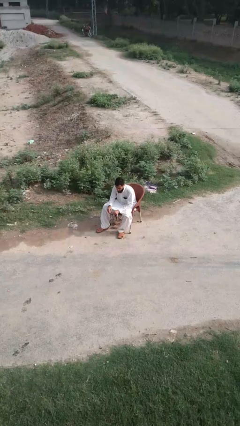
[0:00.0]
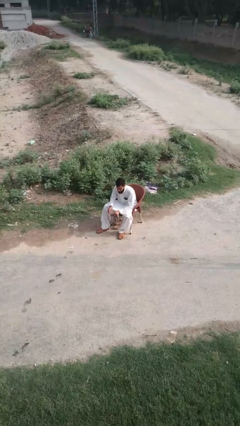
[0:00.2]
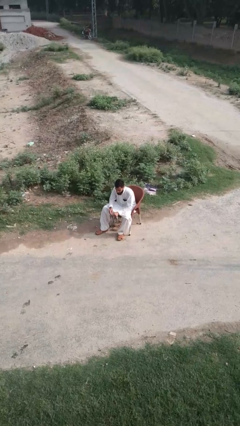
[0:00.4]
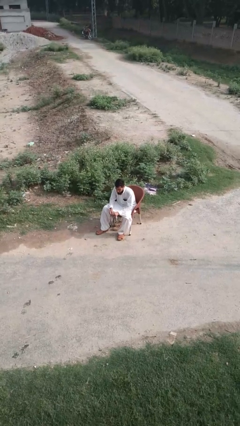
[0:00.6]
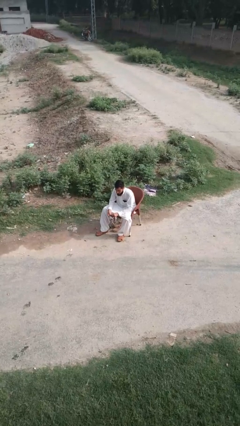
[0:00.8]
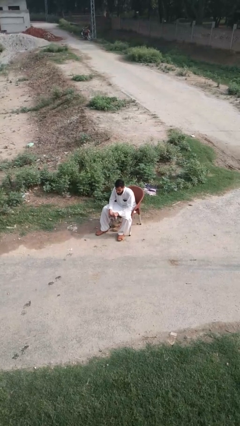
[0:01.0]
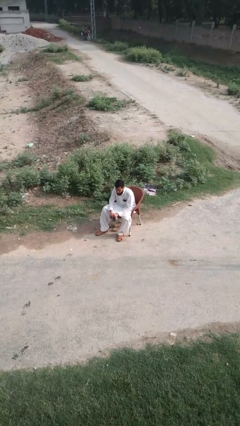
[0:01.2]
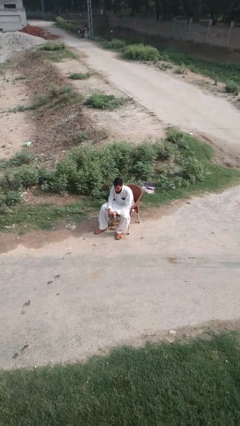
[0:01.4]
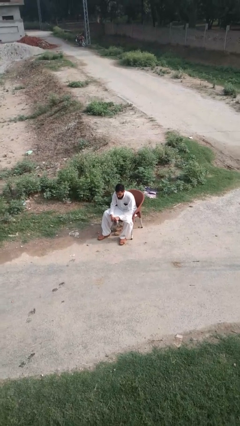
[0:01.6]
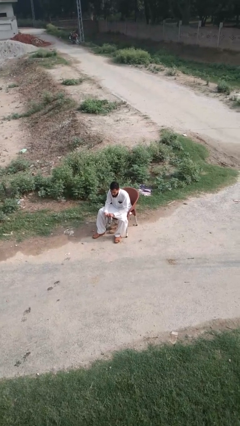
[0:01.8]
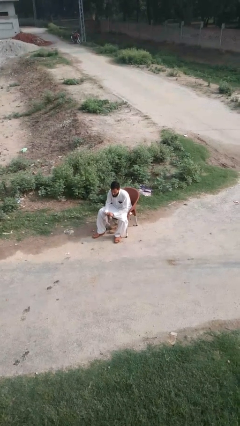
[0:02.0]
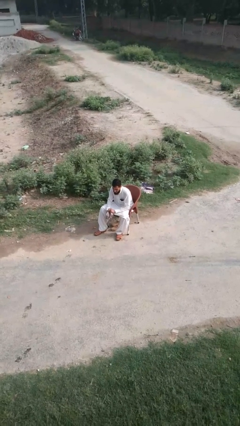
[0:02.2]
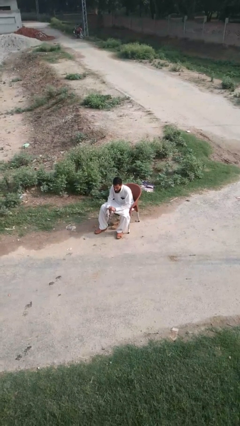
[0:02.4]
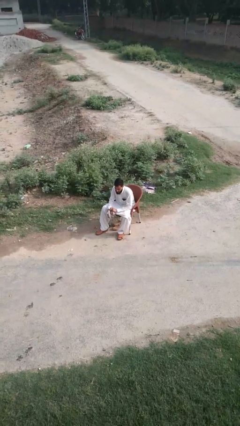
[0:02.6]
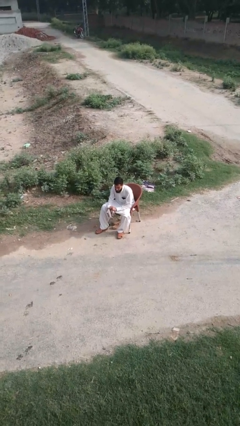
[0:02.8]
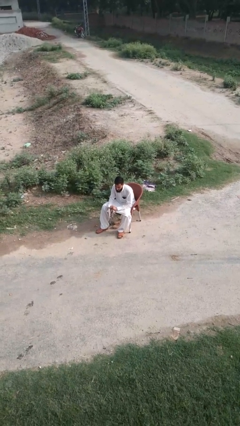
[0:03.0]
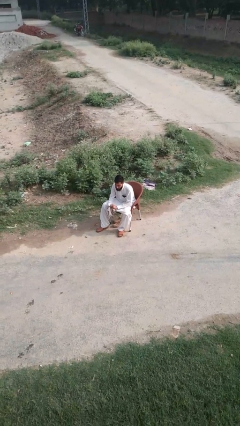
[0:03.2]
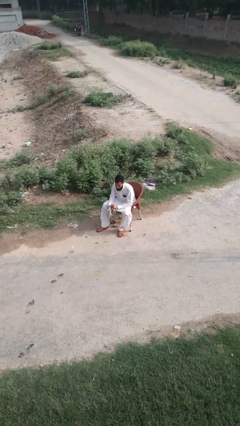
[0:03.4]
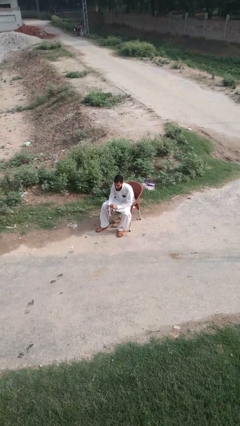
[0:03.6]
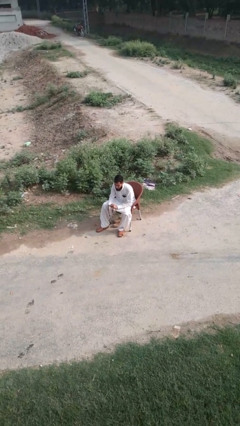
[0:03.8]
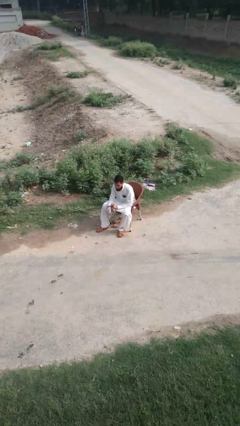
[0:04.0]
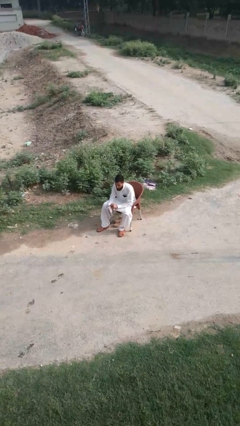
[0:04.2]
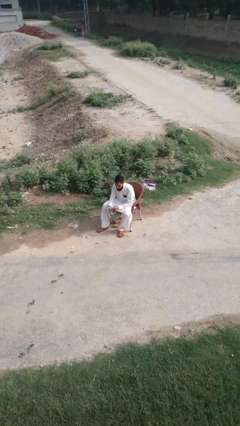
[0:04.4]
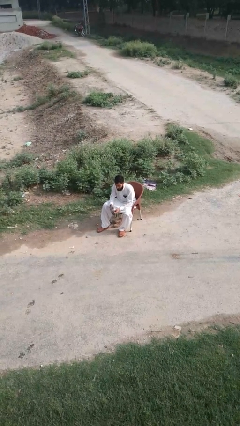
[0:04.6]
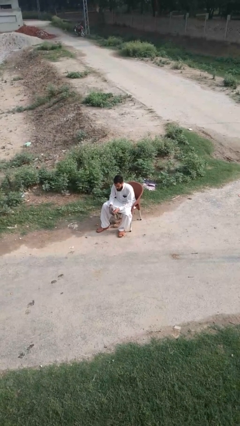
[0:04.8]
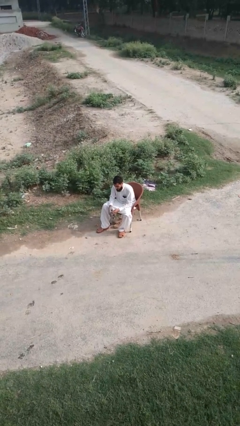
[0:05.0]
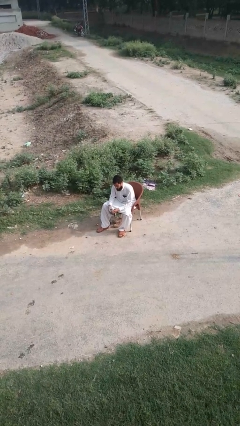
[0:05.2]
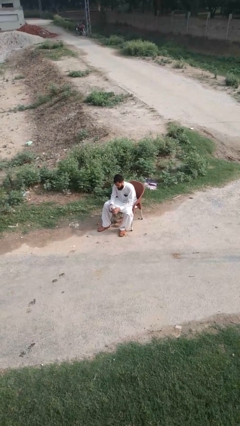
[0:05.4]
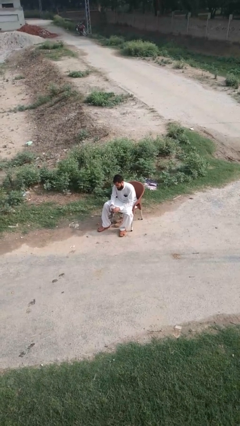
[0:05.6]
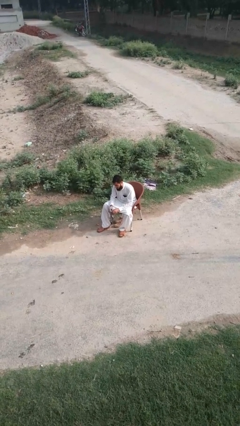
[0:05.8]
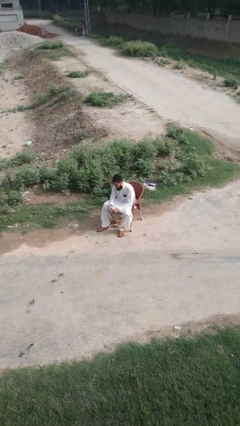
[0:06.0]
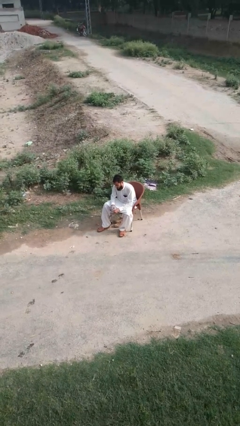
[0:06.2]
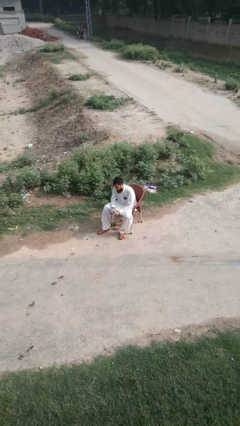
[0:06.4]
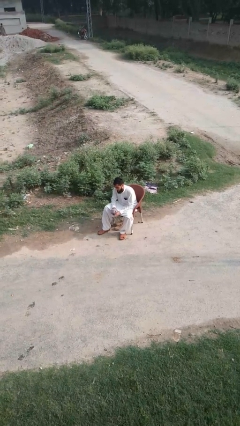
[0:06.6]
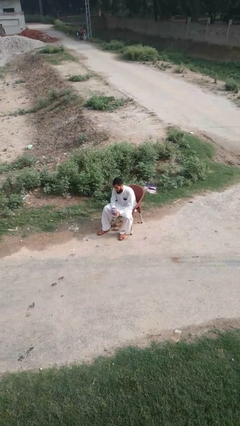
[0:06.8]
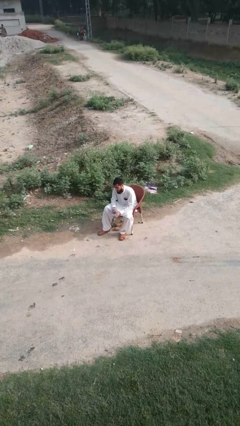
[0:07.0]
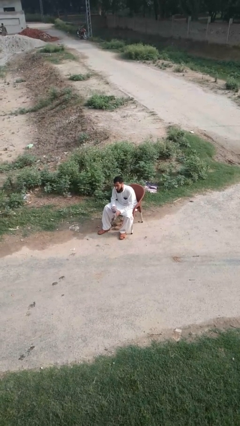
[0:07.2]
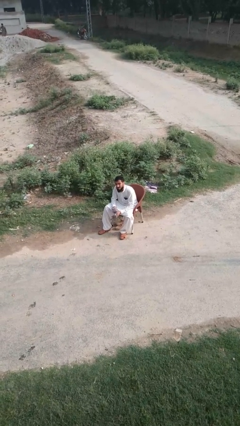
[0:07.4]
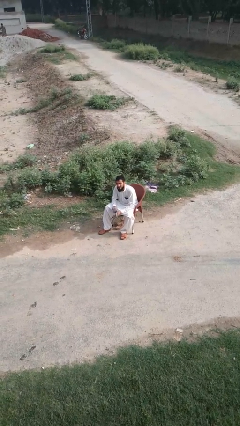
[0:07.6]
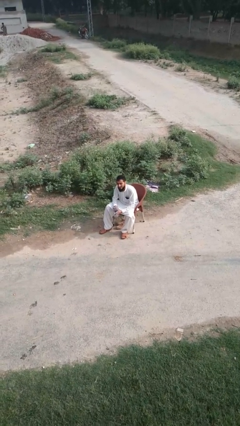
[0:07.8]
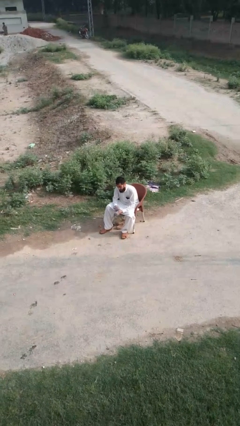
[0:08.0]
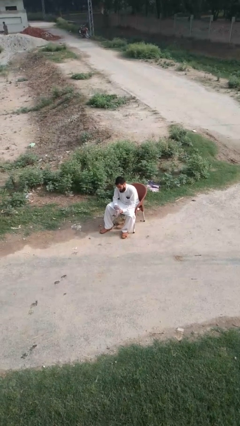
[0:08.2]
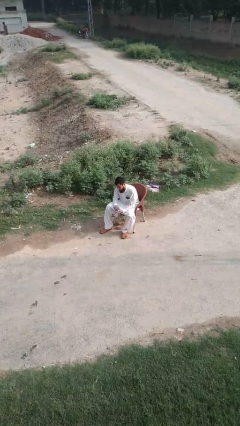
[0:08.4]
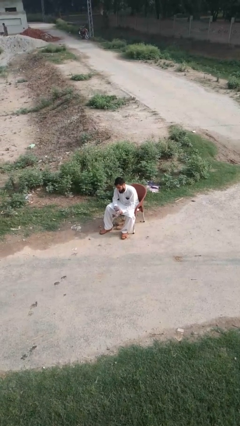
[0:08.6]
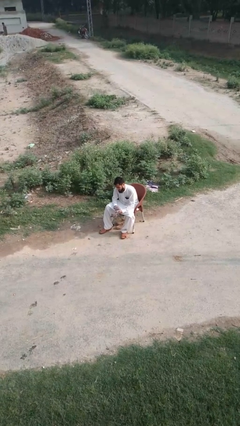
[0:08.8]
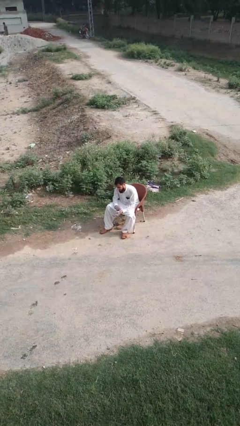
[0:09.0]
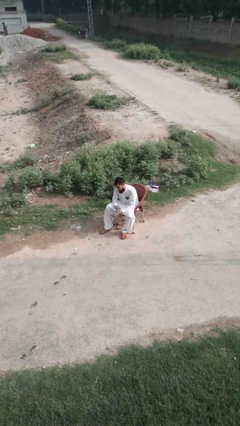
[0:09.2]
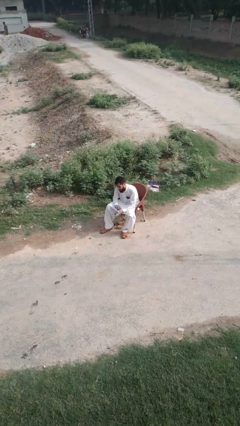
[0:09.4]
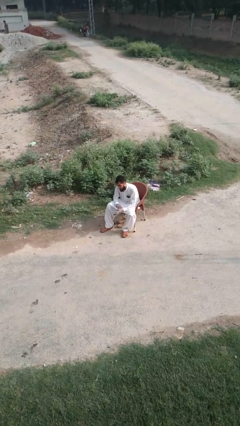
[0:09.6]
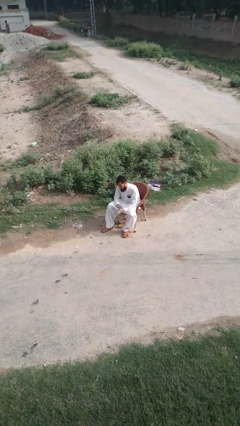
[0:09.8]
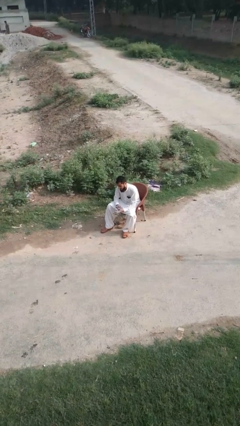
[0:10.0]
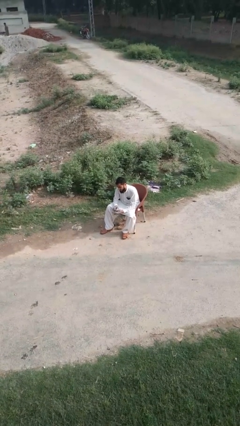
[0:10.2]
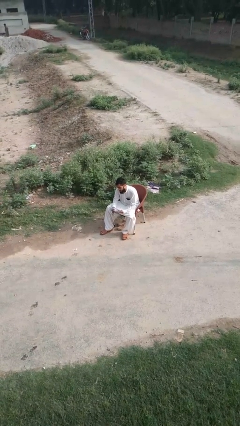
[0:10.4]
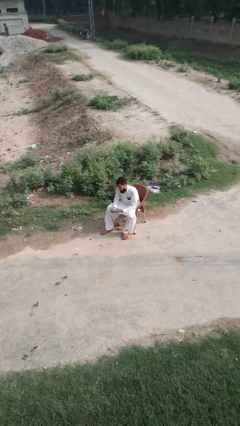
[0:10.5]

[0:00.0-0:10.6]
person puts on gloves

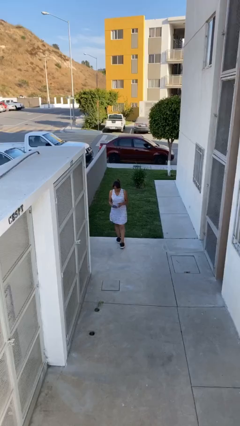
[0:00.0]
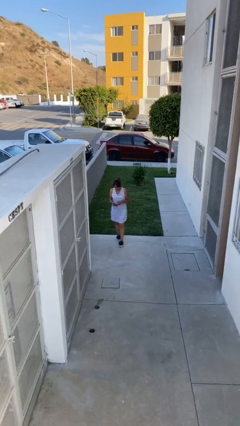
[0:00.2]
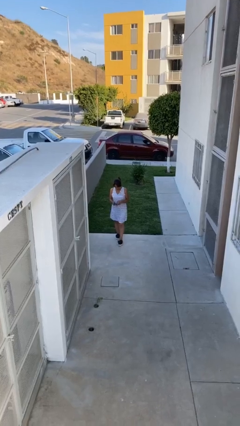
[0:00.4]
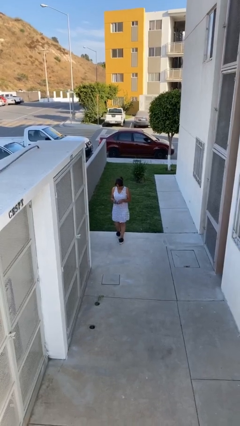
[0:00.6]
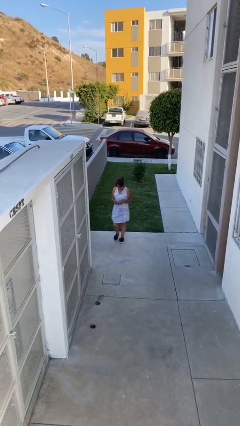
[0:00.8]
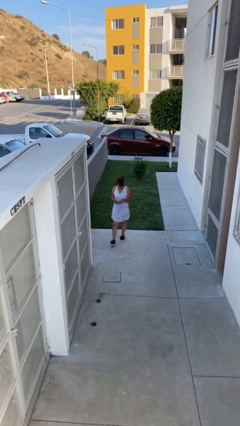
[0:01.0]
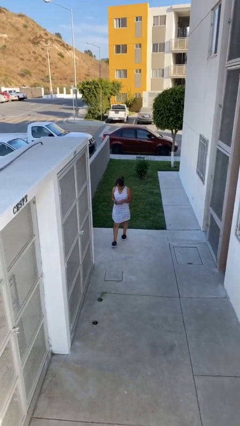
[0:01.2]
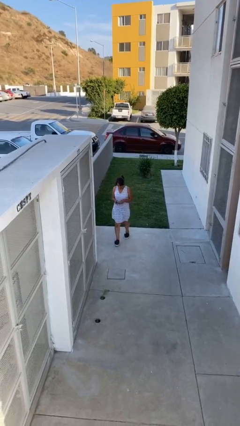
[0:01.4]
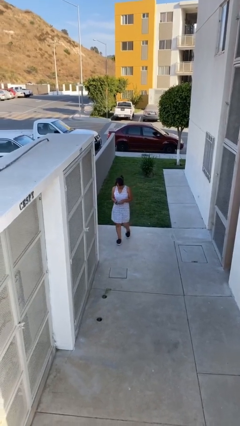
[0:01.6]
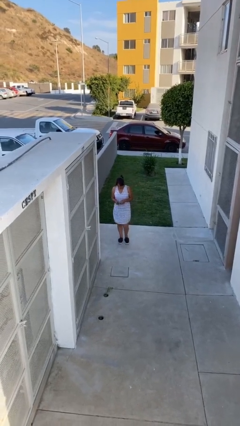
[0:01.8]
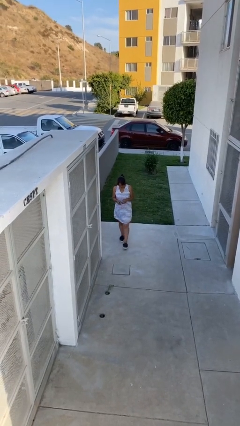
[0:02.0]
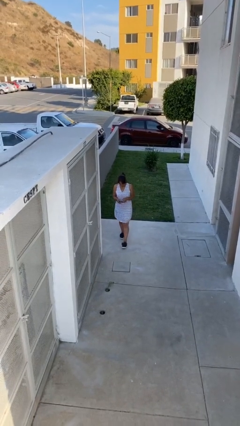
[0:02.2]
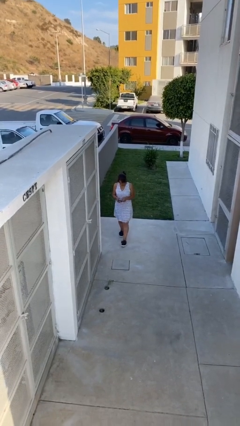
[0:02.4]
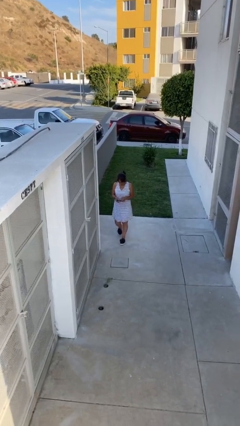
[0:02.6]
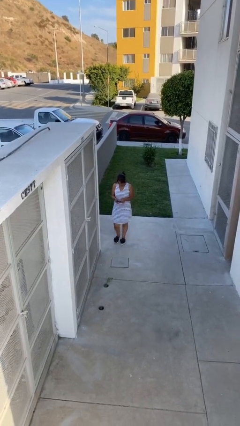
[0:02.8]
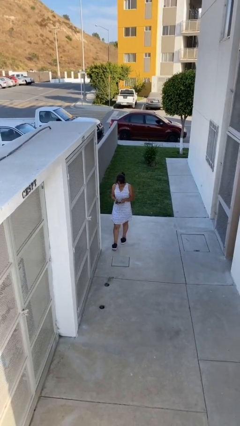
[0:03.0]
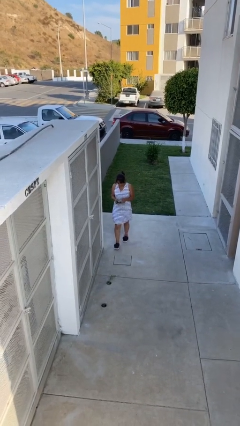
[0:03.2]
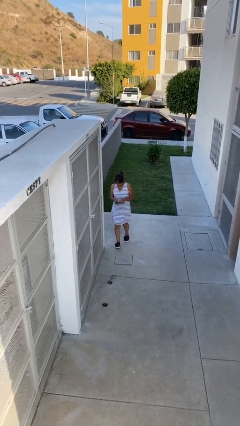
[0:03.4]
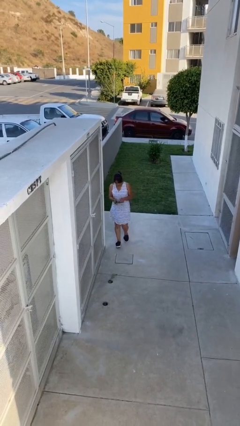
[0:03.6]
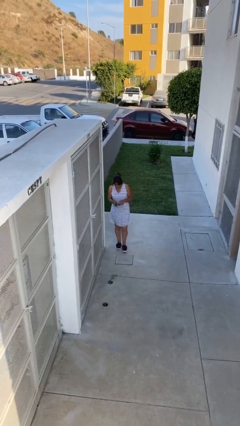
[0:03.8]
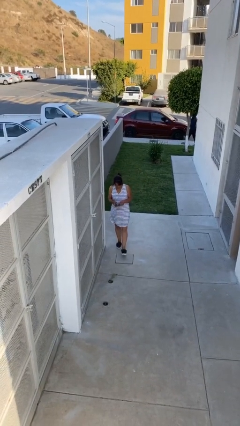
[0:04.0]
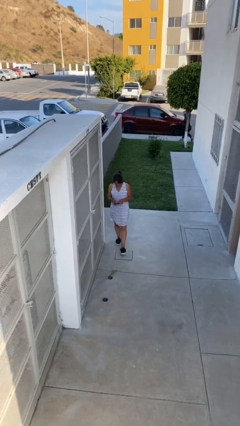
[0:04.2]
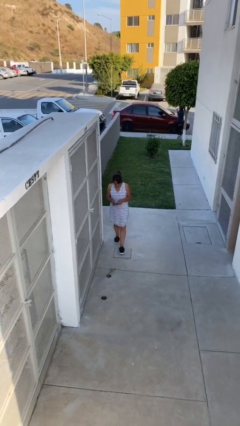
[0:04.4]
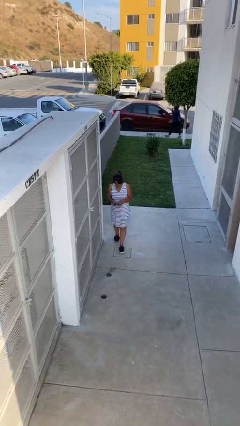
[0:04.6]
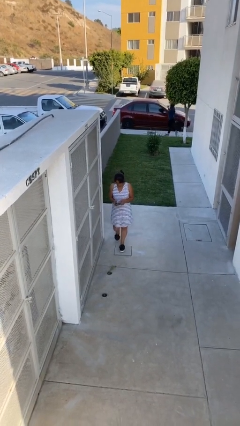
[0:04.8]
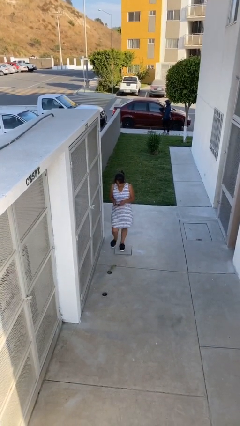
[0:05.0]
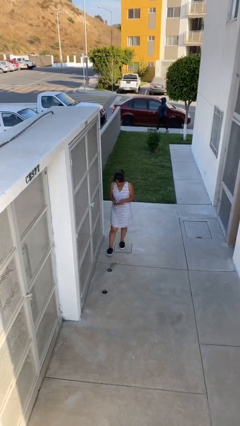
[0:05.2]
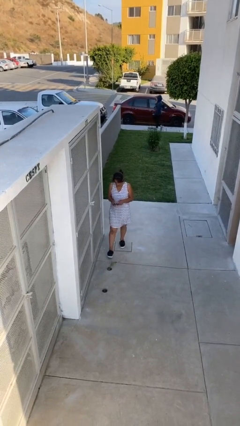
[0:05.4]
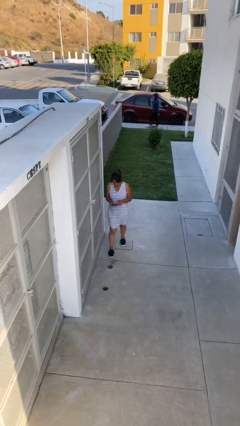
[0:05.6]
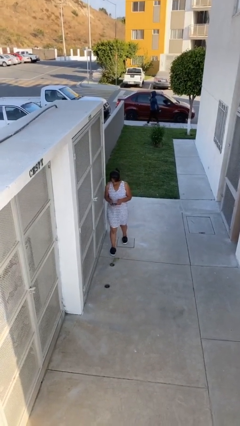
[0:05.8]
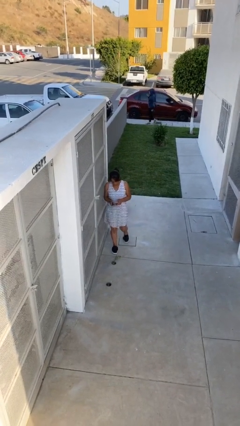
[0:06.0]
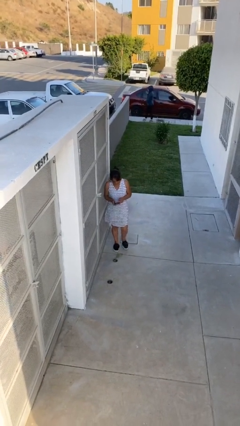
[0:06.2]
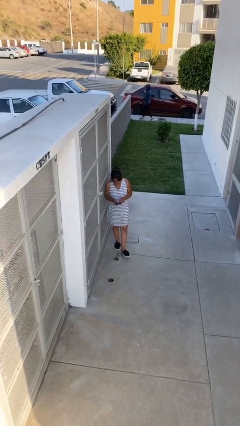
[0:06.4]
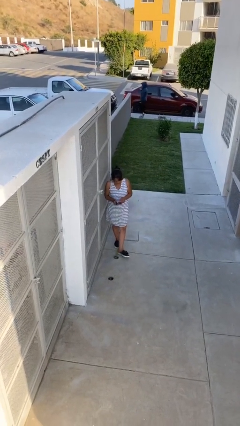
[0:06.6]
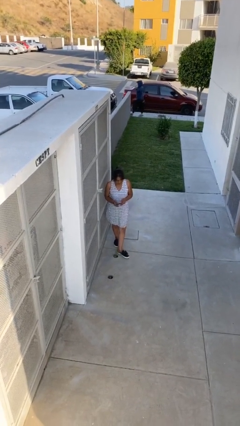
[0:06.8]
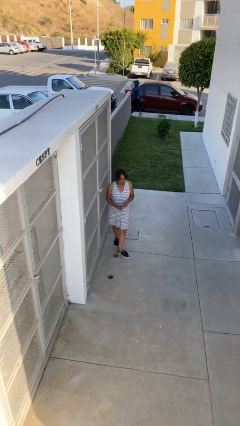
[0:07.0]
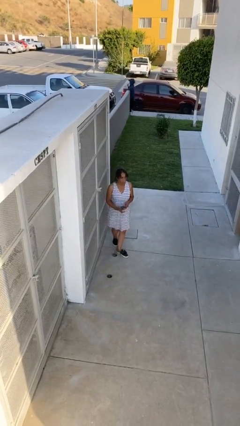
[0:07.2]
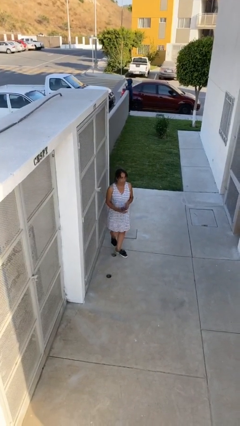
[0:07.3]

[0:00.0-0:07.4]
person texts on phone

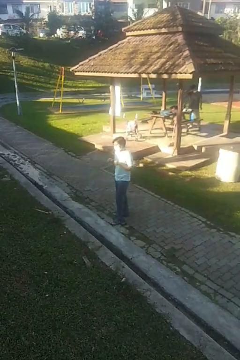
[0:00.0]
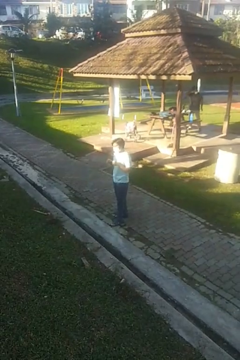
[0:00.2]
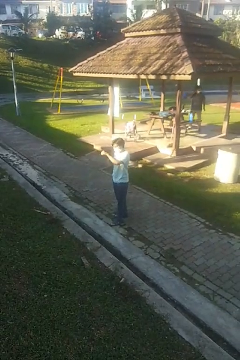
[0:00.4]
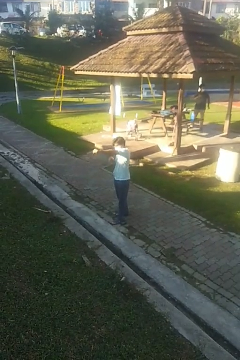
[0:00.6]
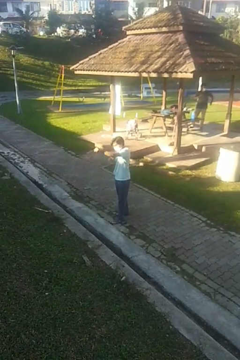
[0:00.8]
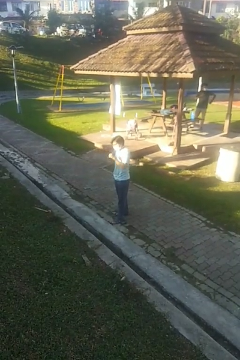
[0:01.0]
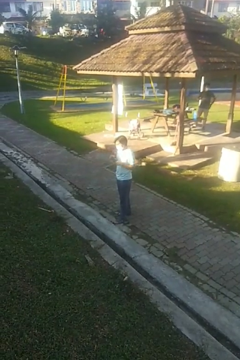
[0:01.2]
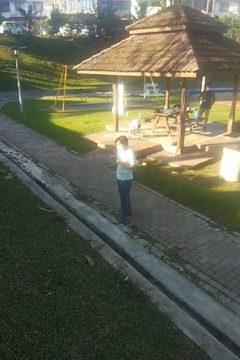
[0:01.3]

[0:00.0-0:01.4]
person punches
